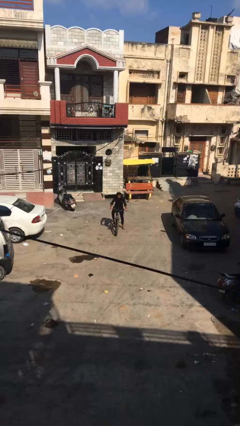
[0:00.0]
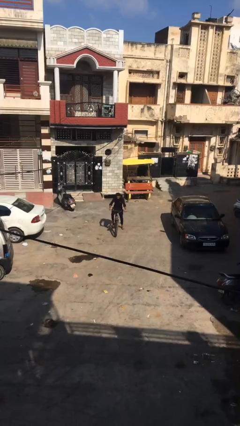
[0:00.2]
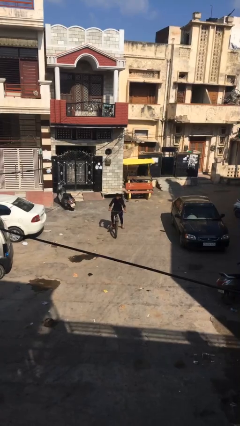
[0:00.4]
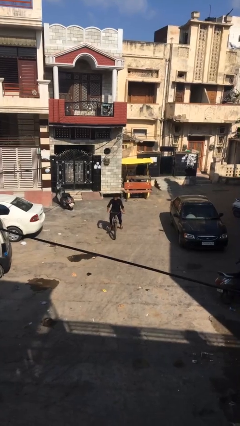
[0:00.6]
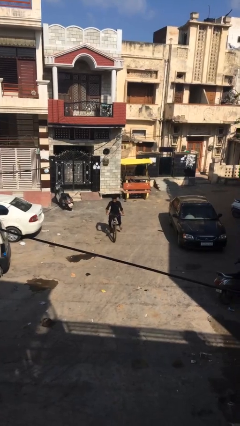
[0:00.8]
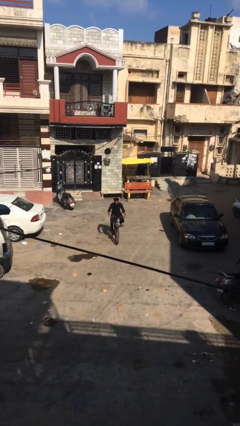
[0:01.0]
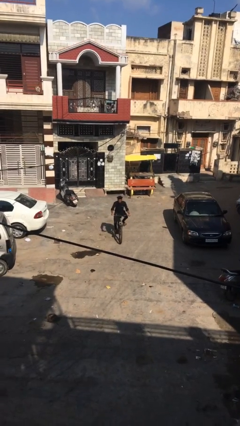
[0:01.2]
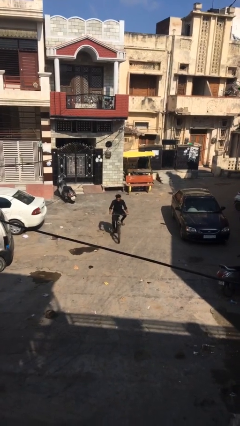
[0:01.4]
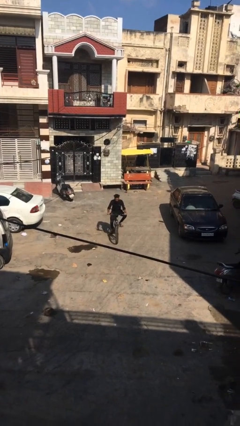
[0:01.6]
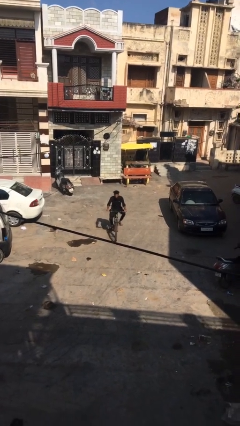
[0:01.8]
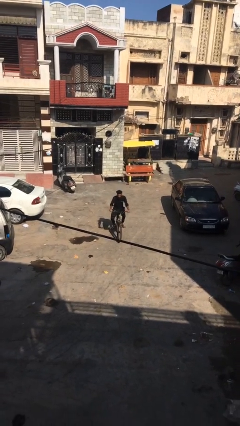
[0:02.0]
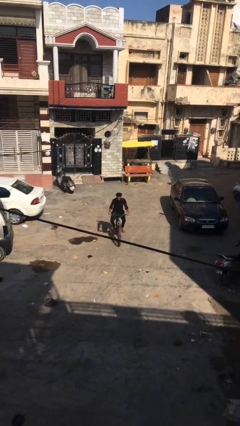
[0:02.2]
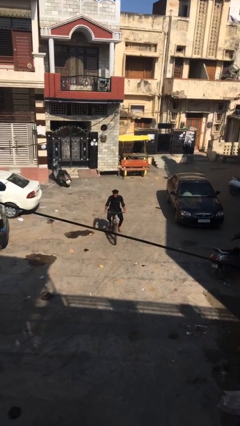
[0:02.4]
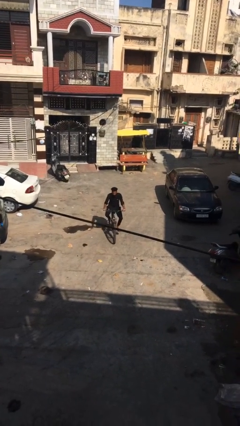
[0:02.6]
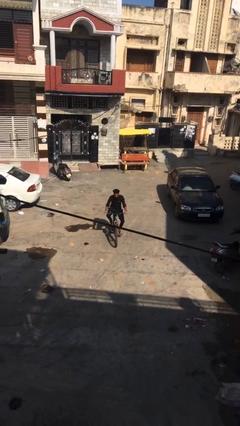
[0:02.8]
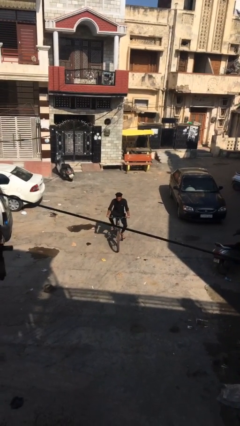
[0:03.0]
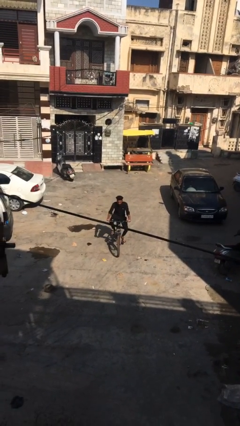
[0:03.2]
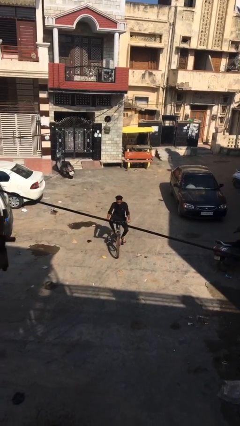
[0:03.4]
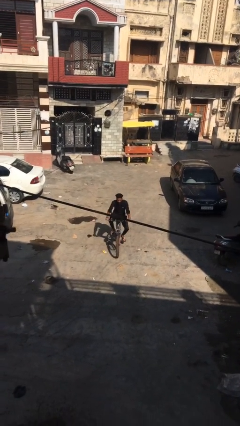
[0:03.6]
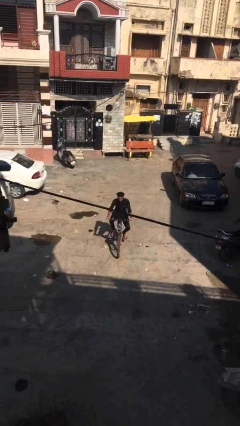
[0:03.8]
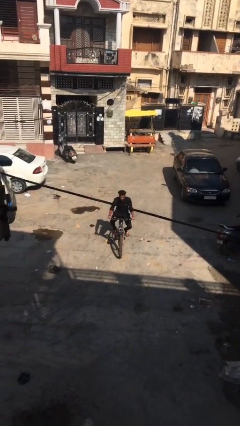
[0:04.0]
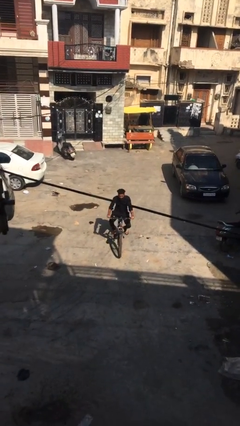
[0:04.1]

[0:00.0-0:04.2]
person rides bicycle

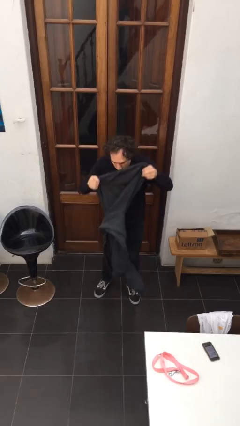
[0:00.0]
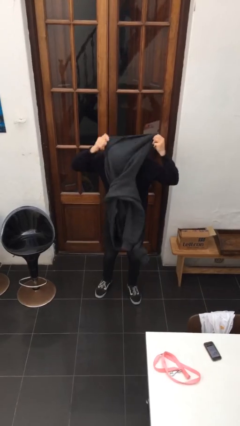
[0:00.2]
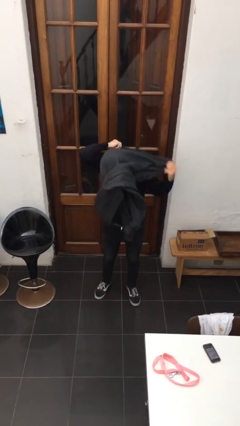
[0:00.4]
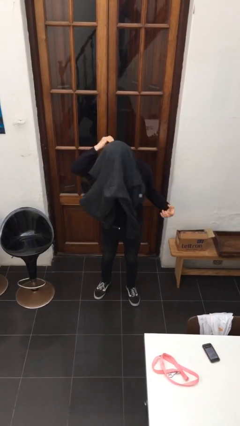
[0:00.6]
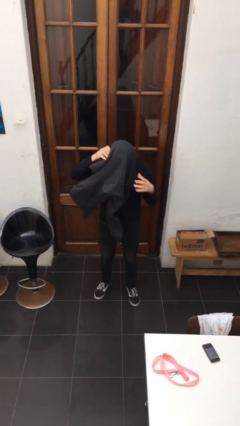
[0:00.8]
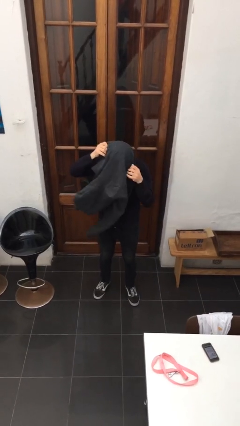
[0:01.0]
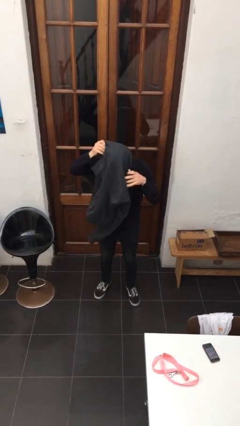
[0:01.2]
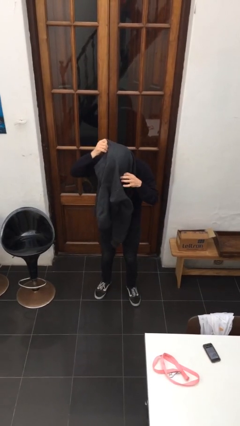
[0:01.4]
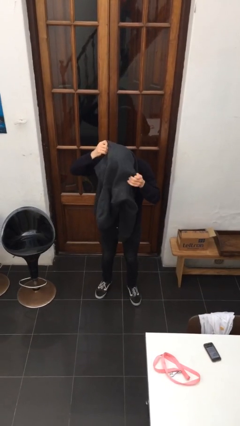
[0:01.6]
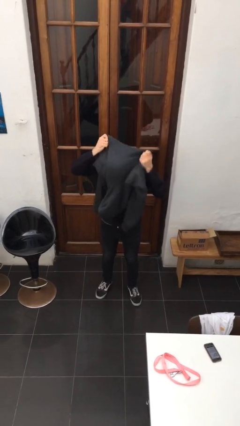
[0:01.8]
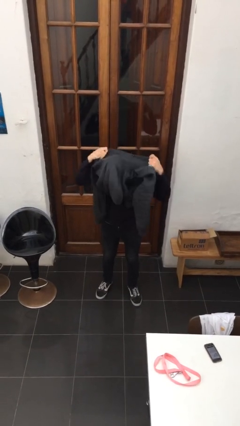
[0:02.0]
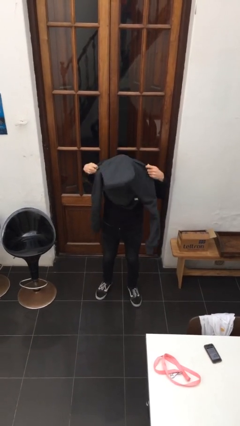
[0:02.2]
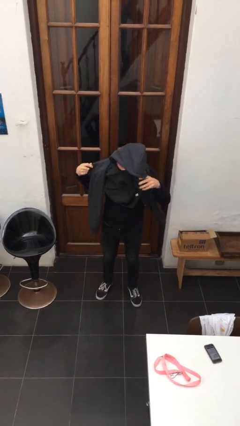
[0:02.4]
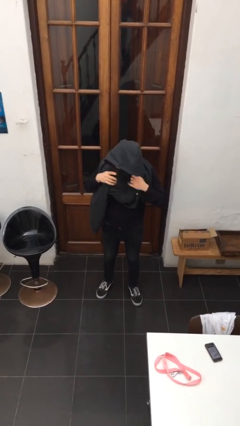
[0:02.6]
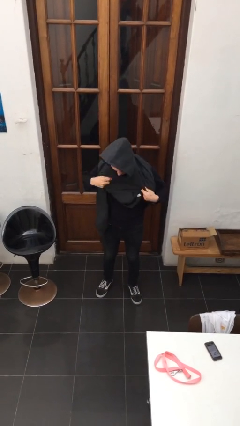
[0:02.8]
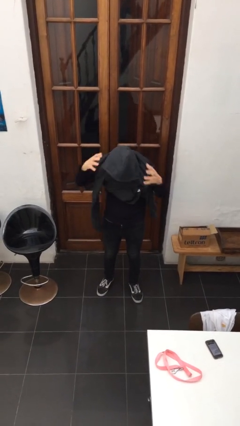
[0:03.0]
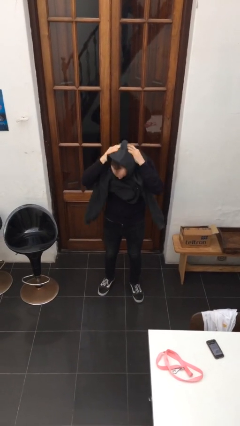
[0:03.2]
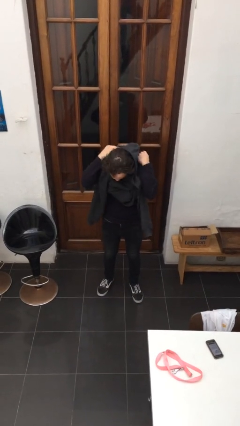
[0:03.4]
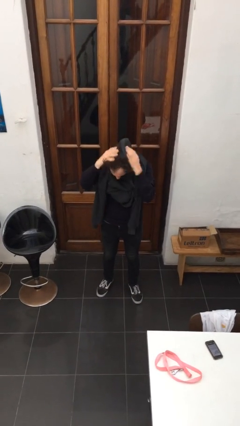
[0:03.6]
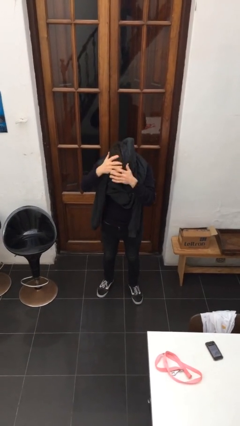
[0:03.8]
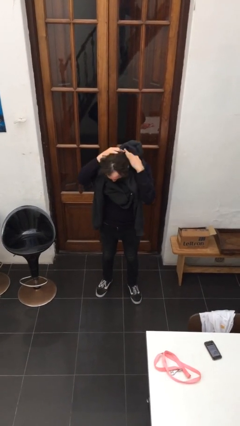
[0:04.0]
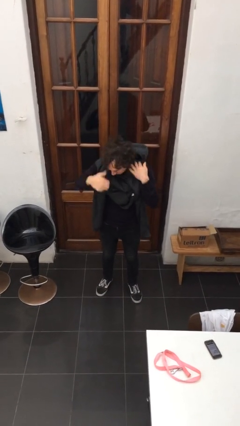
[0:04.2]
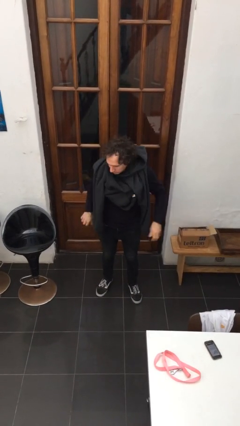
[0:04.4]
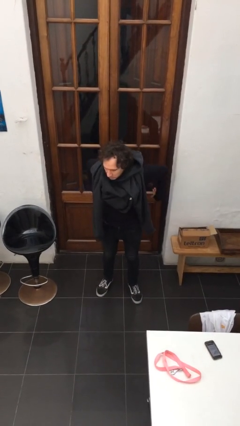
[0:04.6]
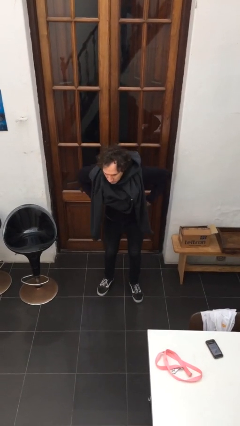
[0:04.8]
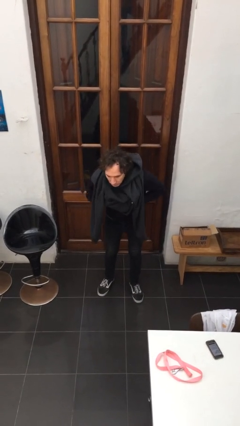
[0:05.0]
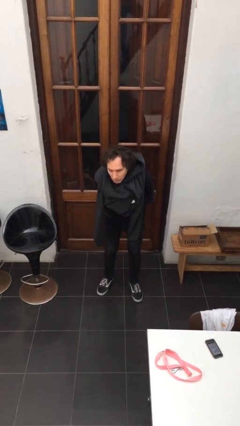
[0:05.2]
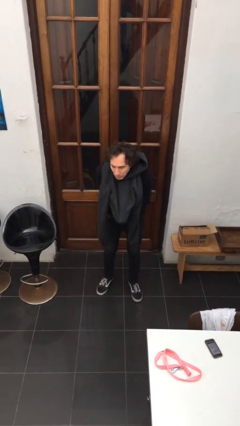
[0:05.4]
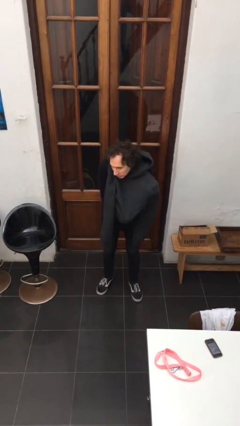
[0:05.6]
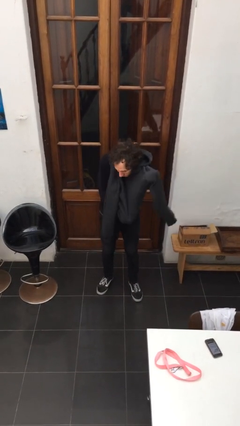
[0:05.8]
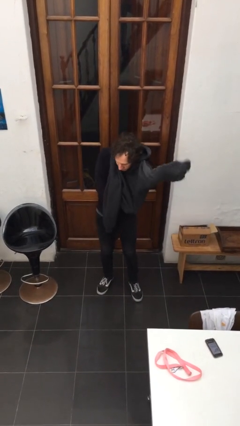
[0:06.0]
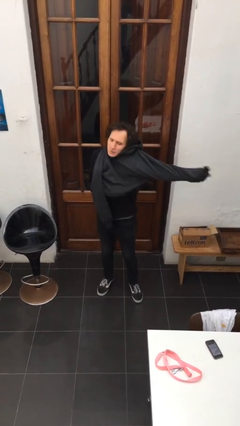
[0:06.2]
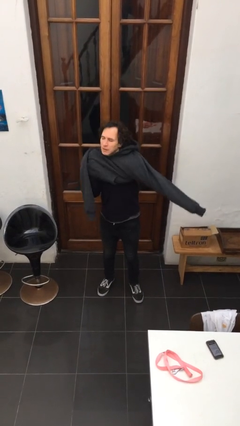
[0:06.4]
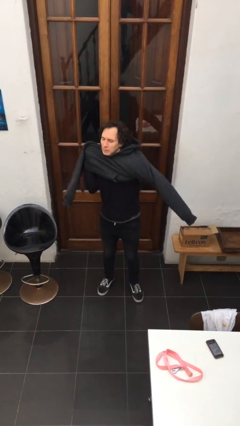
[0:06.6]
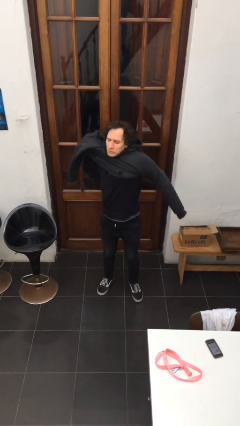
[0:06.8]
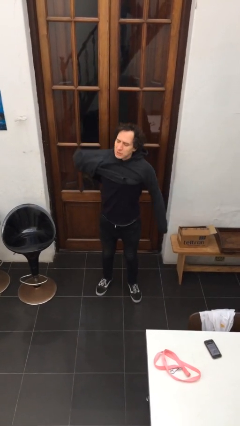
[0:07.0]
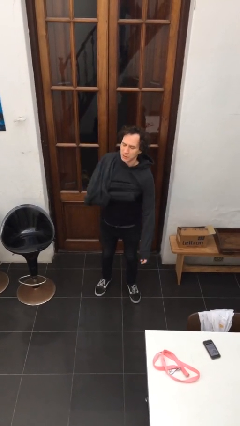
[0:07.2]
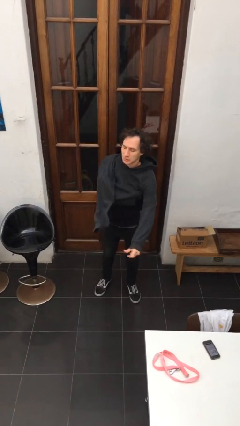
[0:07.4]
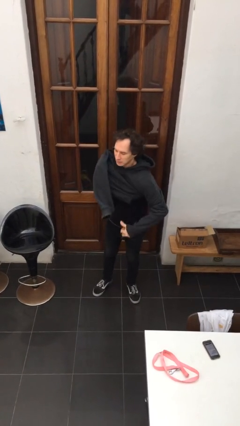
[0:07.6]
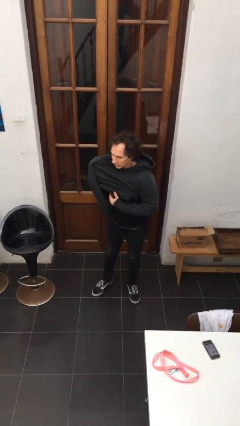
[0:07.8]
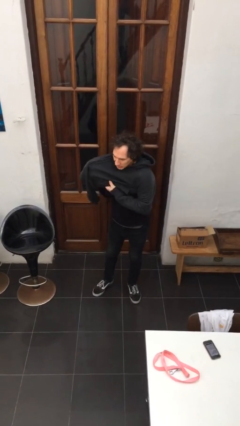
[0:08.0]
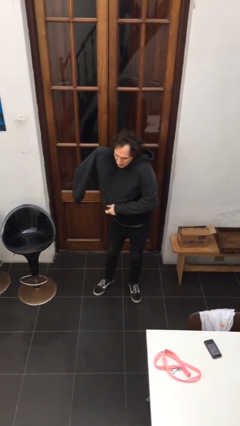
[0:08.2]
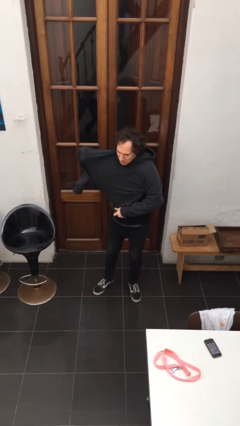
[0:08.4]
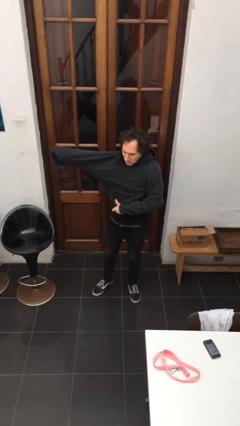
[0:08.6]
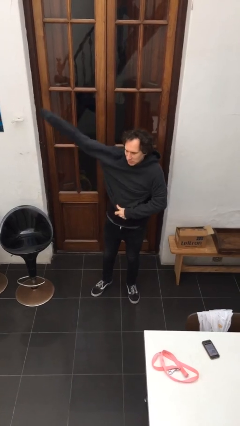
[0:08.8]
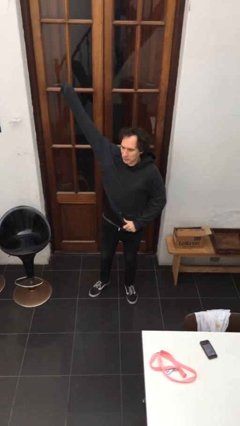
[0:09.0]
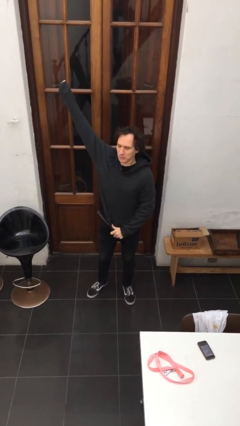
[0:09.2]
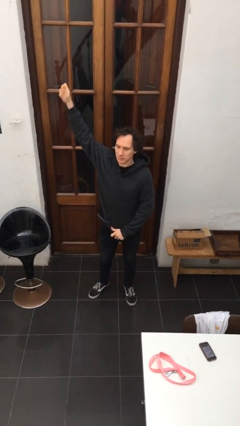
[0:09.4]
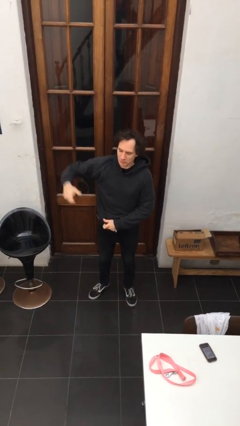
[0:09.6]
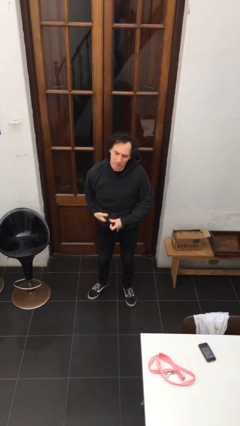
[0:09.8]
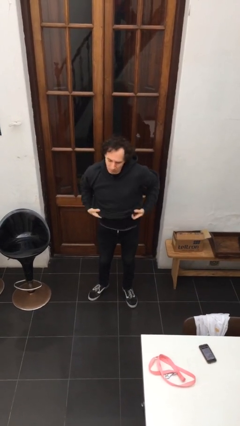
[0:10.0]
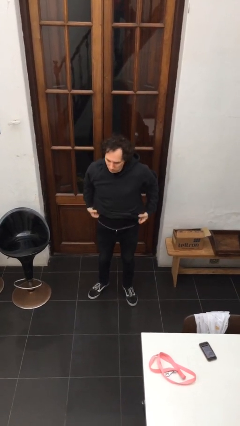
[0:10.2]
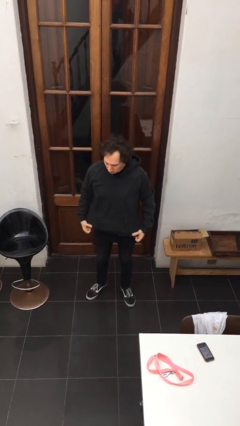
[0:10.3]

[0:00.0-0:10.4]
person puts on hoodie

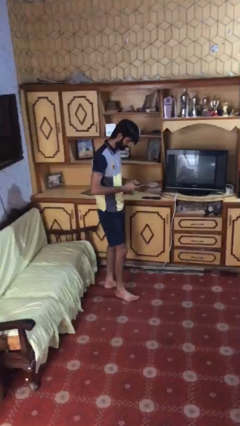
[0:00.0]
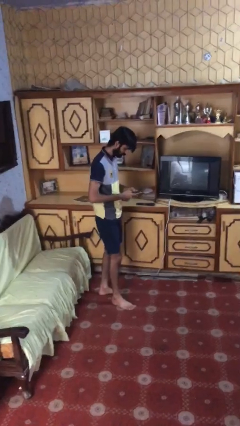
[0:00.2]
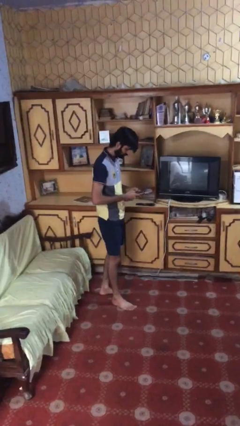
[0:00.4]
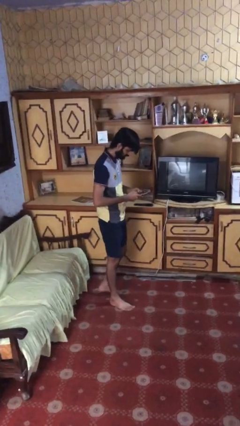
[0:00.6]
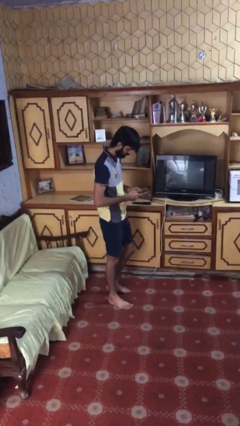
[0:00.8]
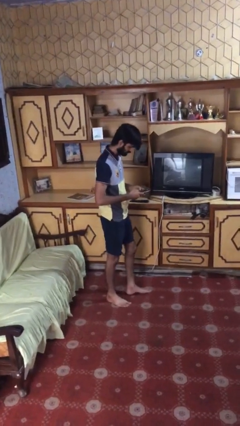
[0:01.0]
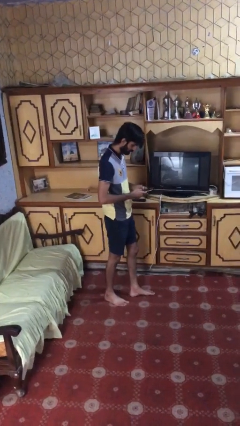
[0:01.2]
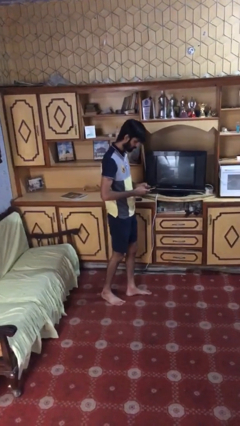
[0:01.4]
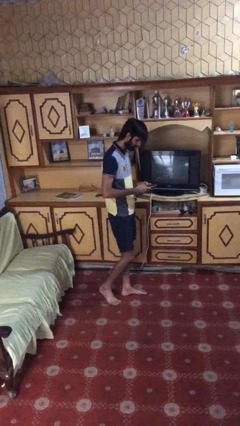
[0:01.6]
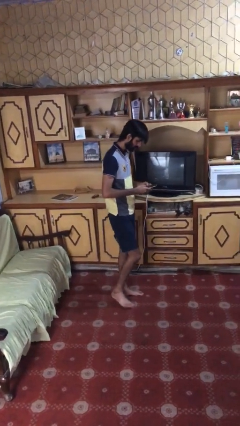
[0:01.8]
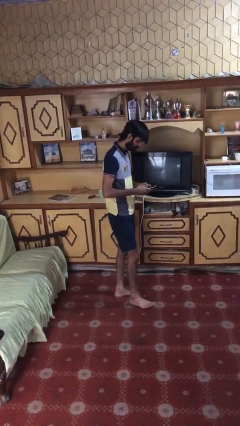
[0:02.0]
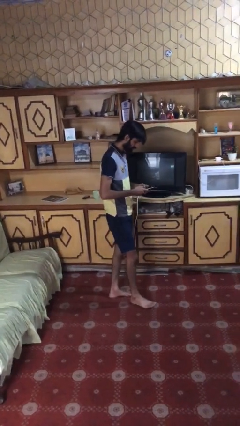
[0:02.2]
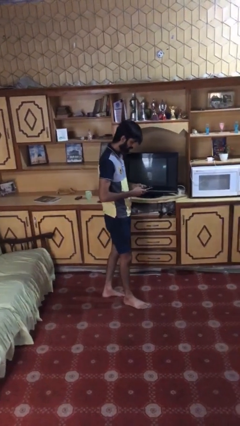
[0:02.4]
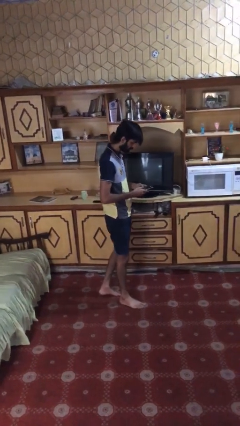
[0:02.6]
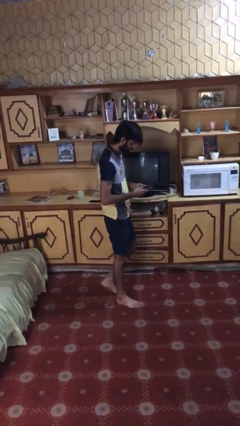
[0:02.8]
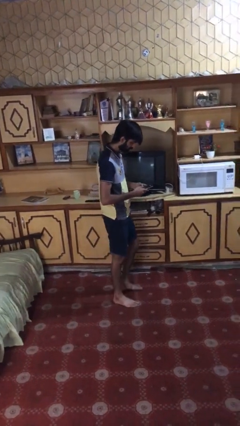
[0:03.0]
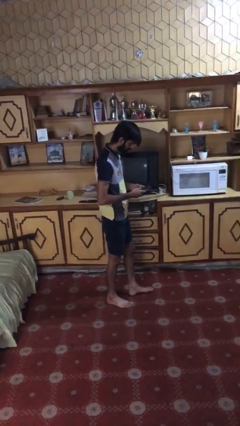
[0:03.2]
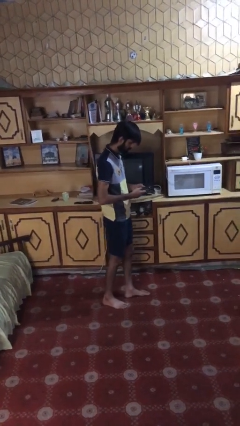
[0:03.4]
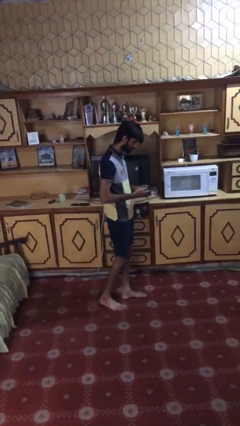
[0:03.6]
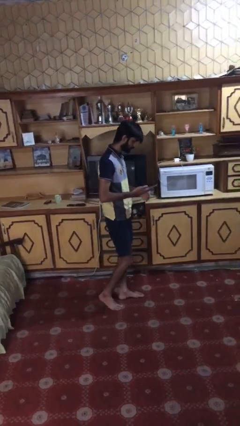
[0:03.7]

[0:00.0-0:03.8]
person texts on phone
